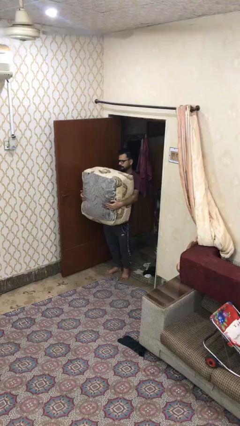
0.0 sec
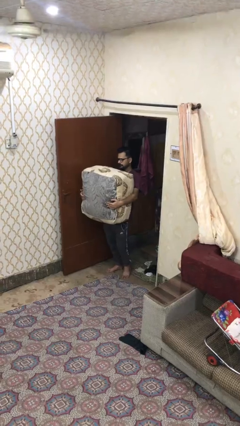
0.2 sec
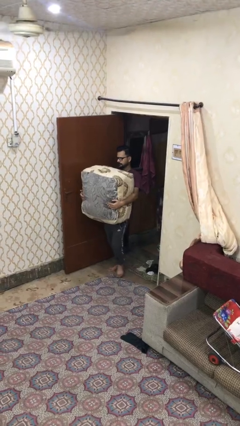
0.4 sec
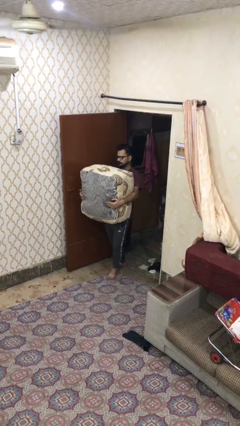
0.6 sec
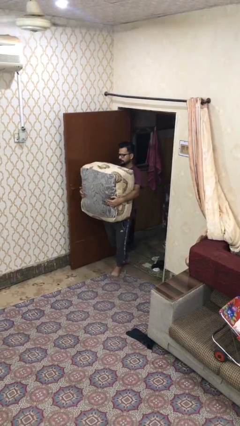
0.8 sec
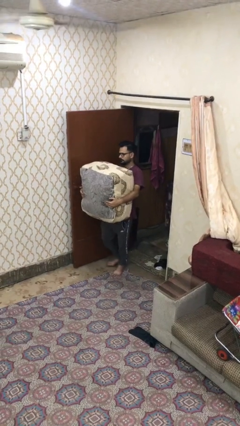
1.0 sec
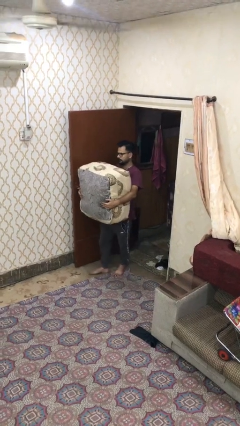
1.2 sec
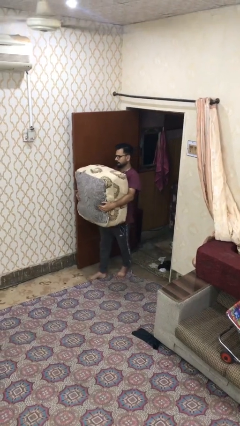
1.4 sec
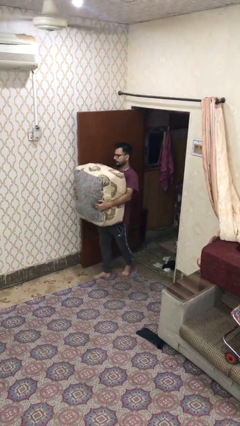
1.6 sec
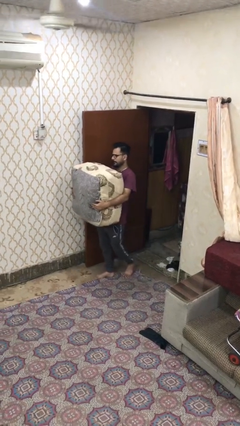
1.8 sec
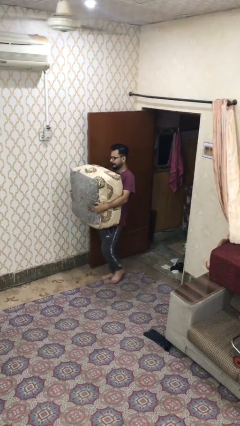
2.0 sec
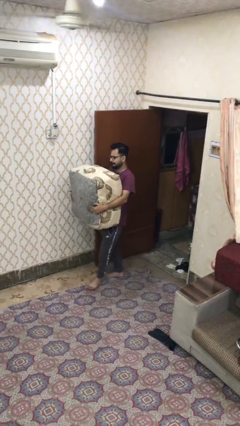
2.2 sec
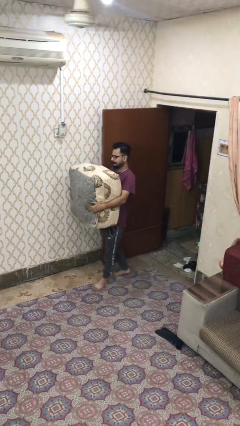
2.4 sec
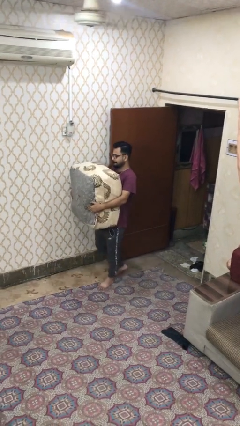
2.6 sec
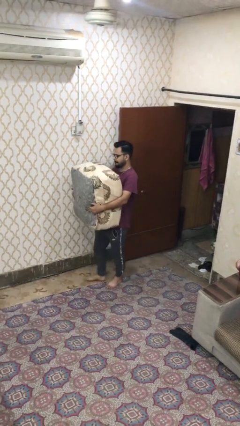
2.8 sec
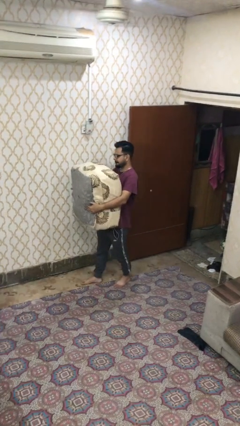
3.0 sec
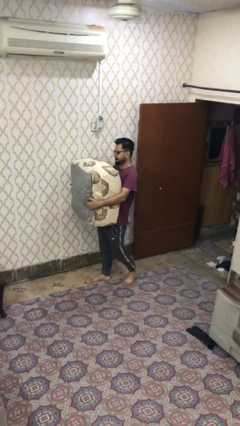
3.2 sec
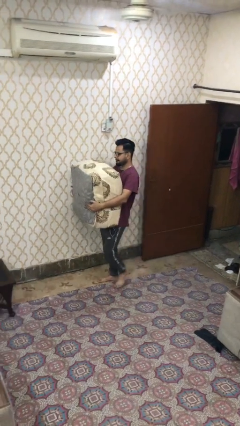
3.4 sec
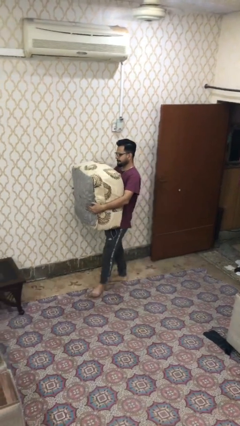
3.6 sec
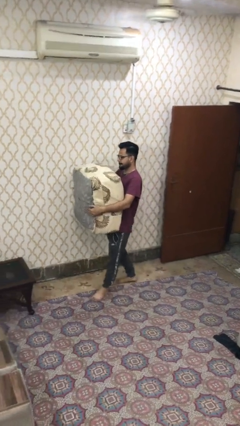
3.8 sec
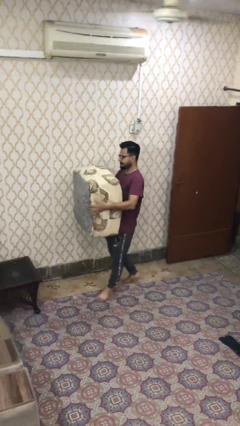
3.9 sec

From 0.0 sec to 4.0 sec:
person carries heavy object

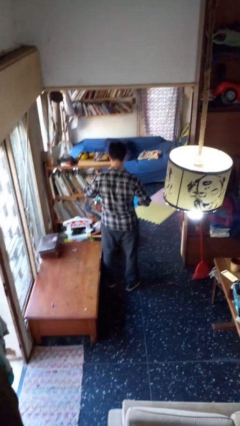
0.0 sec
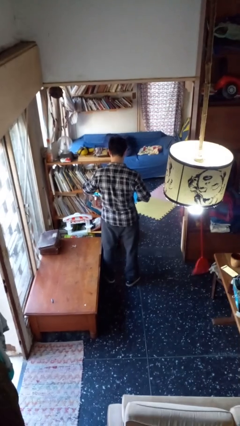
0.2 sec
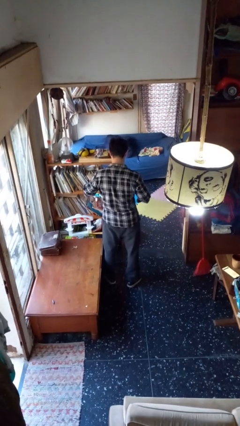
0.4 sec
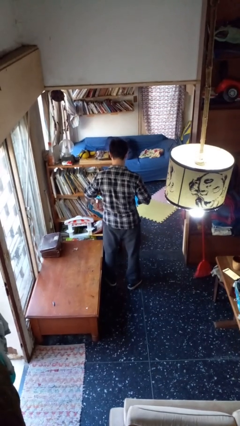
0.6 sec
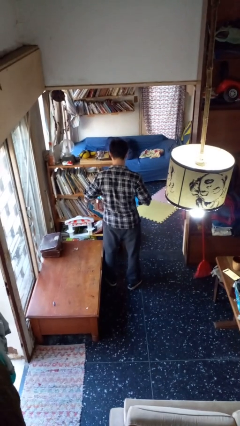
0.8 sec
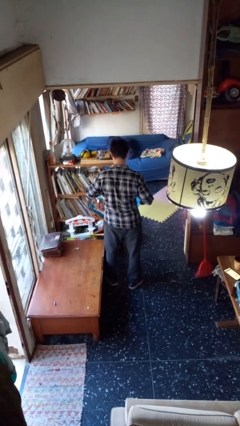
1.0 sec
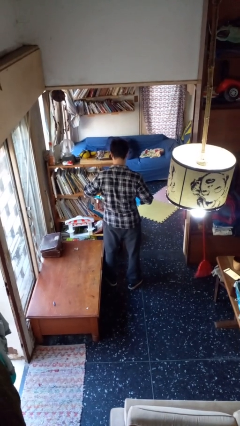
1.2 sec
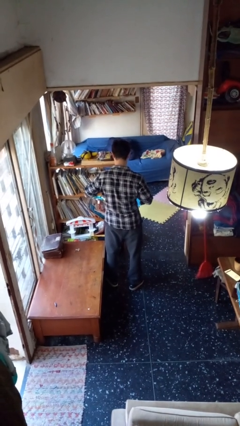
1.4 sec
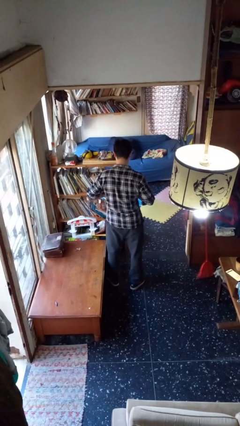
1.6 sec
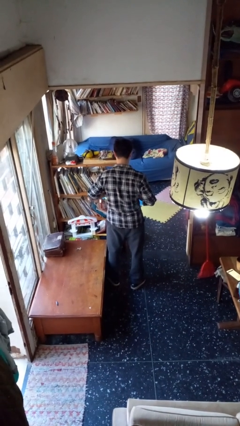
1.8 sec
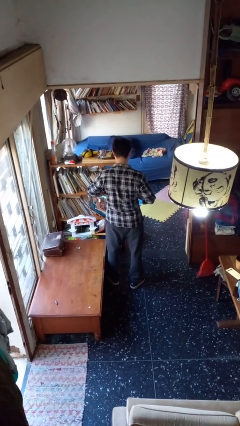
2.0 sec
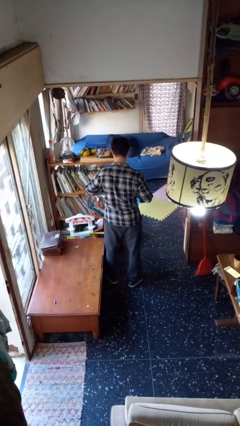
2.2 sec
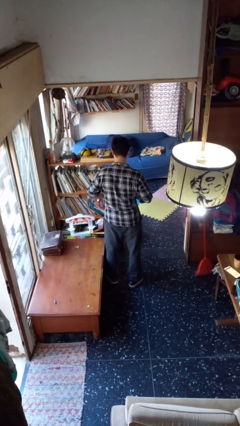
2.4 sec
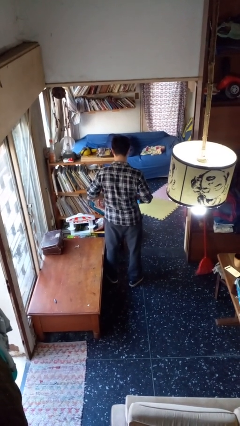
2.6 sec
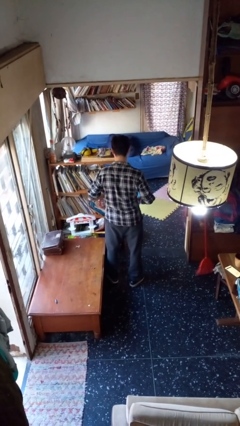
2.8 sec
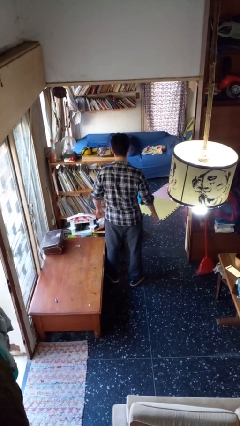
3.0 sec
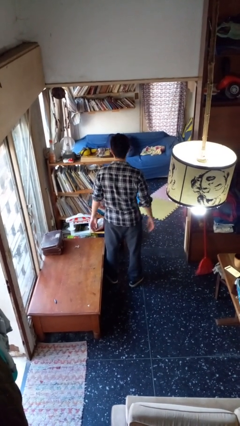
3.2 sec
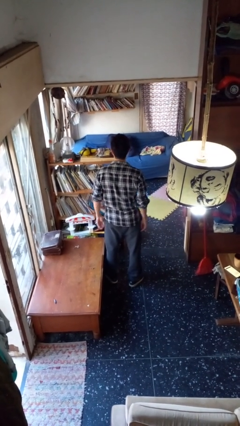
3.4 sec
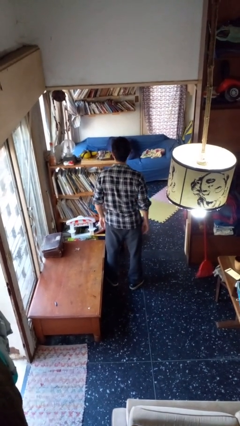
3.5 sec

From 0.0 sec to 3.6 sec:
person unbuttons shirt

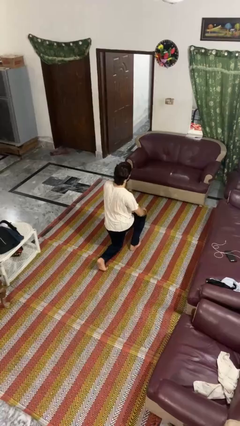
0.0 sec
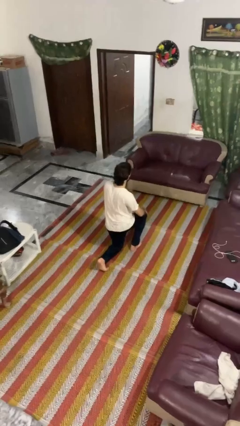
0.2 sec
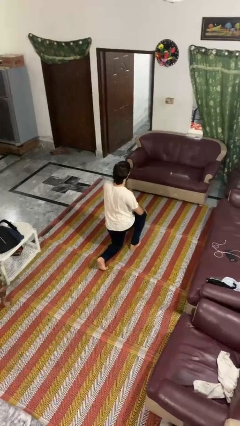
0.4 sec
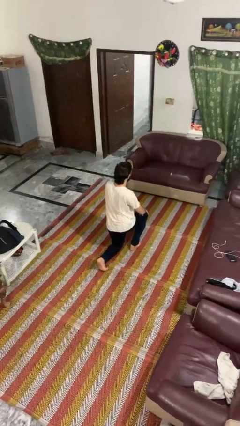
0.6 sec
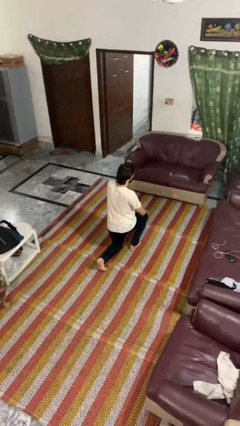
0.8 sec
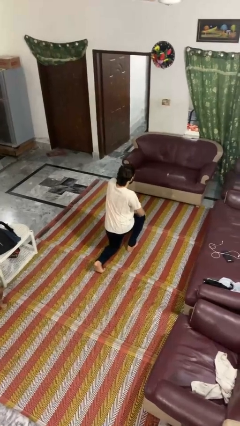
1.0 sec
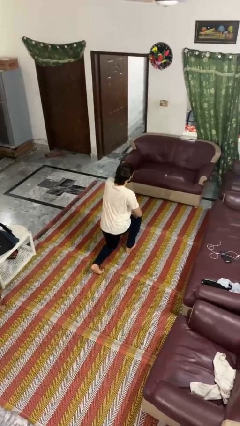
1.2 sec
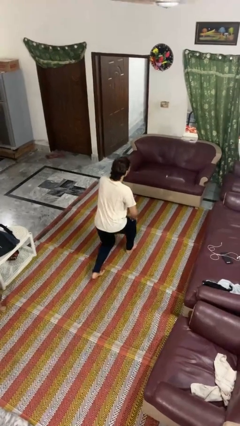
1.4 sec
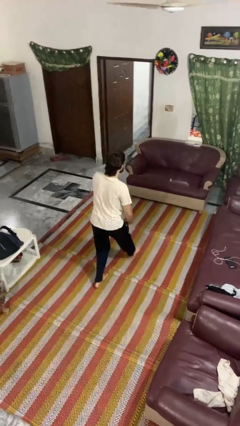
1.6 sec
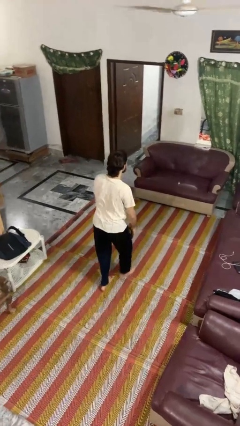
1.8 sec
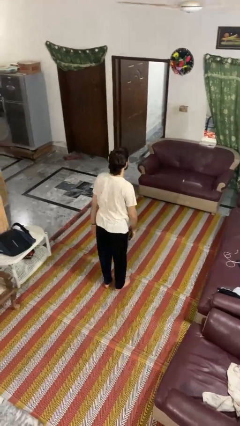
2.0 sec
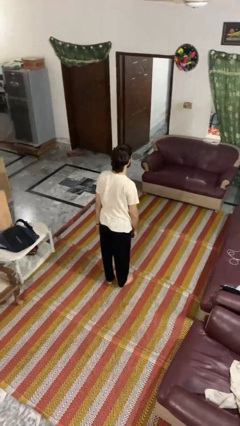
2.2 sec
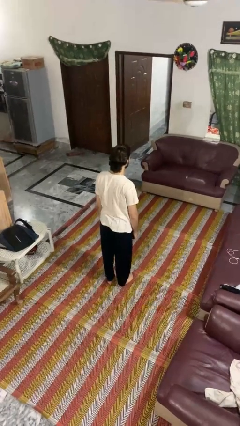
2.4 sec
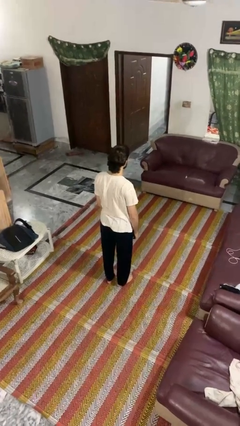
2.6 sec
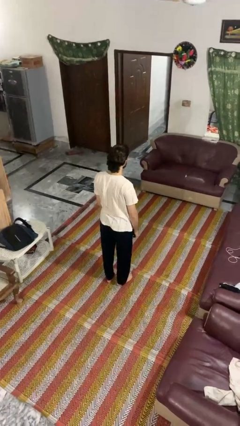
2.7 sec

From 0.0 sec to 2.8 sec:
person stands up from floor

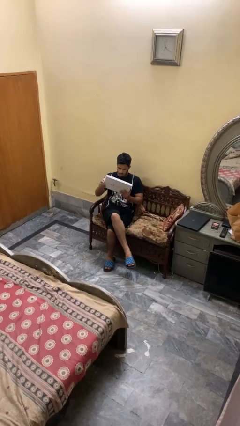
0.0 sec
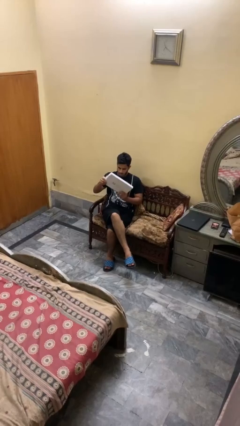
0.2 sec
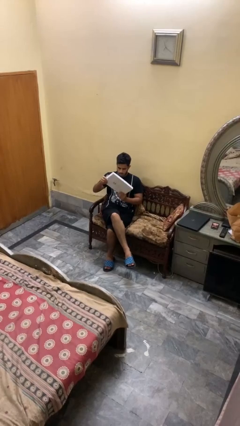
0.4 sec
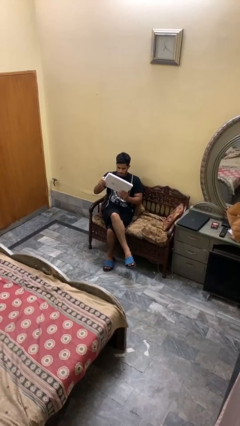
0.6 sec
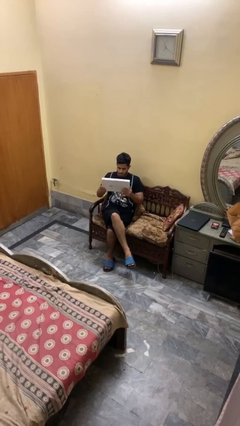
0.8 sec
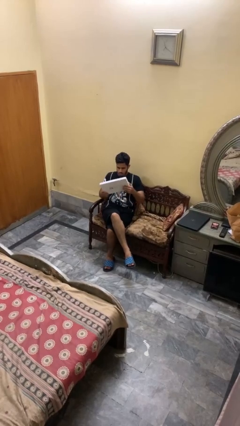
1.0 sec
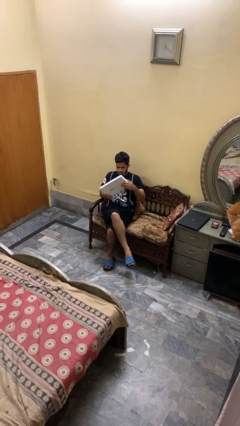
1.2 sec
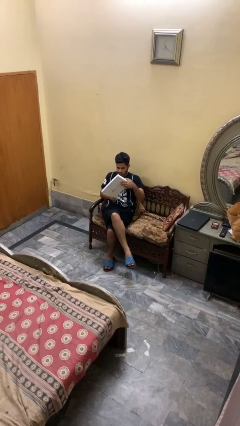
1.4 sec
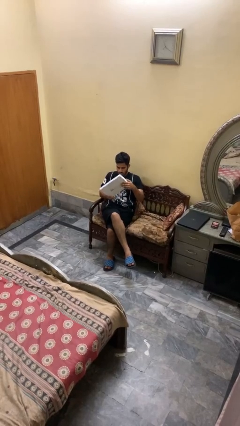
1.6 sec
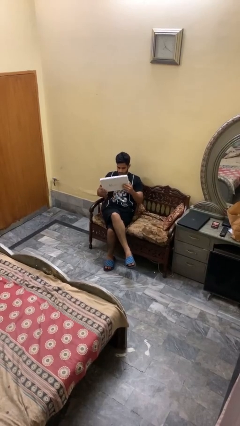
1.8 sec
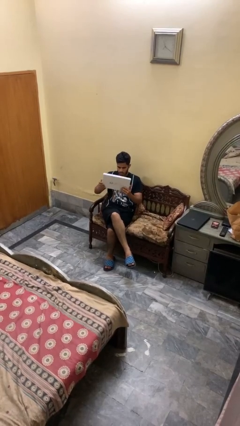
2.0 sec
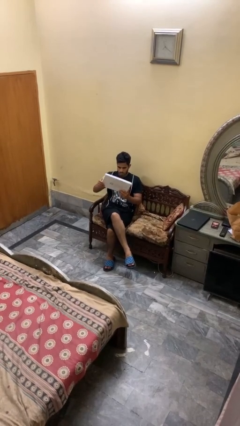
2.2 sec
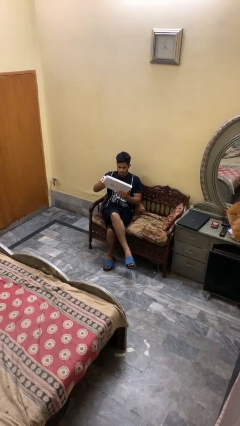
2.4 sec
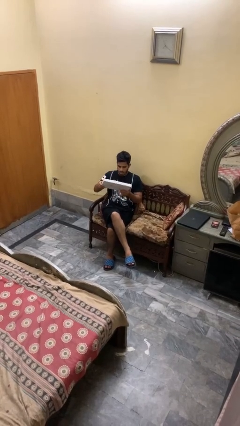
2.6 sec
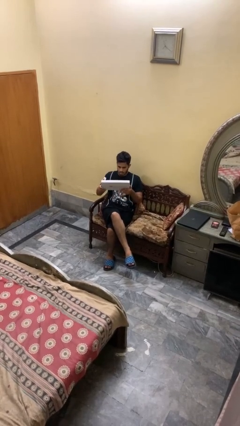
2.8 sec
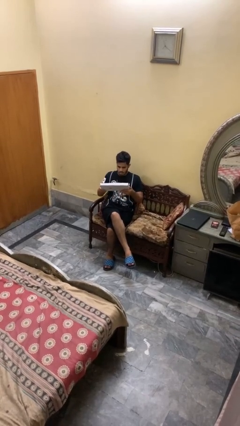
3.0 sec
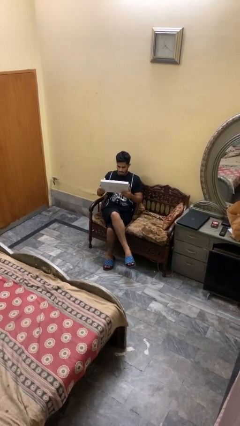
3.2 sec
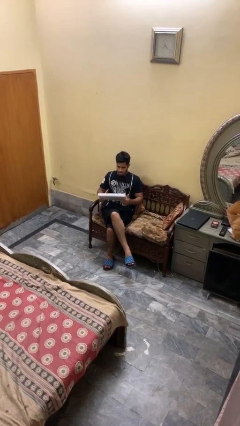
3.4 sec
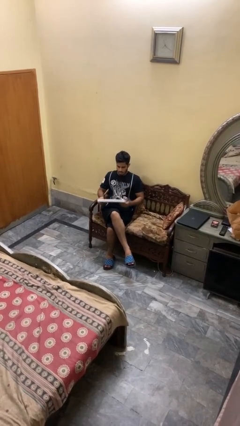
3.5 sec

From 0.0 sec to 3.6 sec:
person interacts with tablet

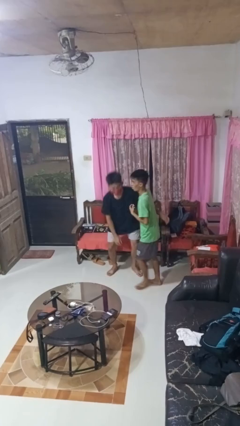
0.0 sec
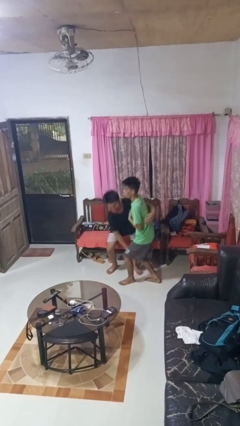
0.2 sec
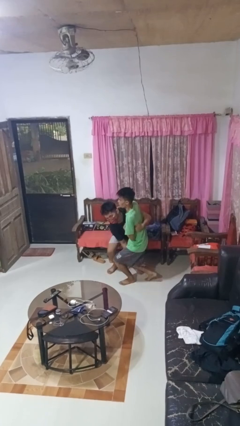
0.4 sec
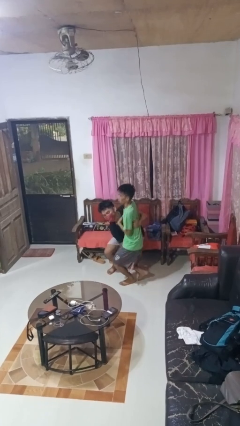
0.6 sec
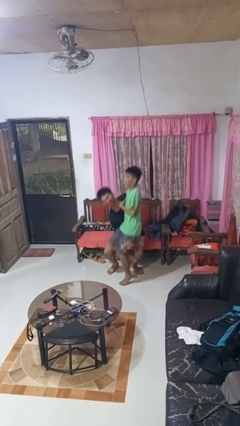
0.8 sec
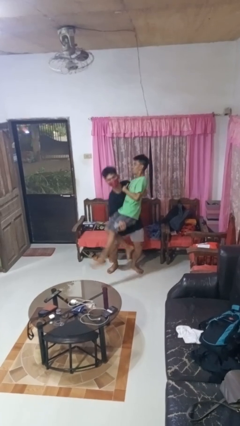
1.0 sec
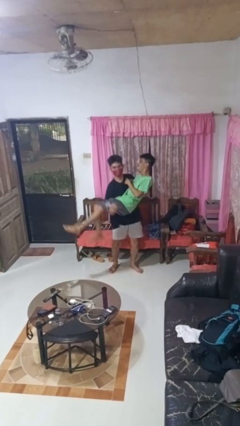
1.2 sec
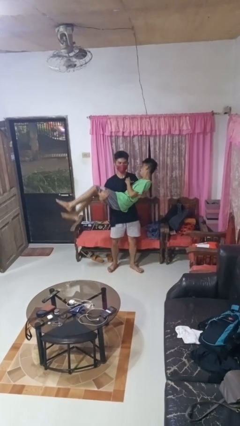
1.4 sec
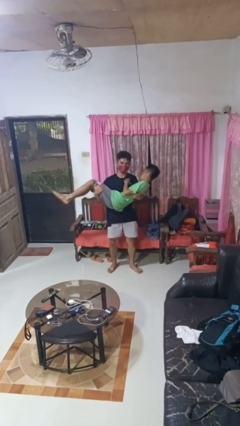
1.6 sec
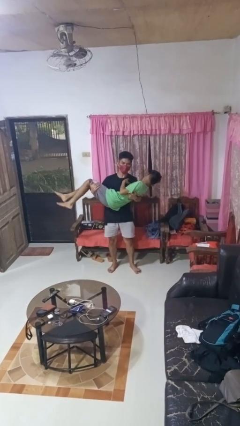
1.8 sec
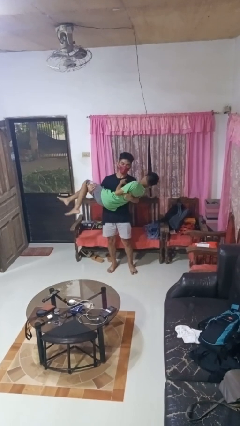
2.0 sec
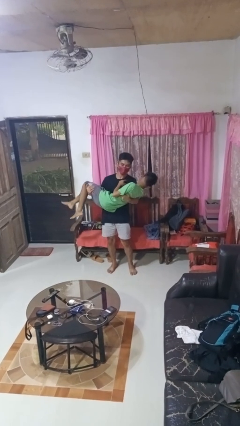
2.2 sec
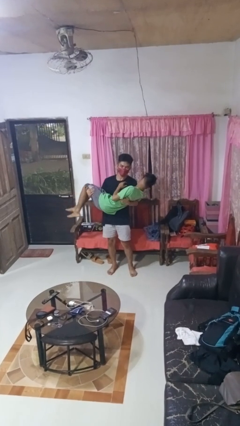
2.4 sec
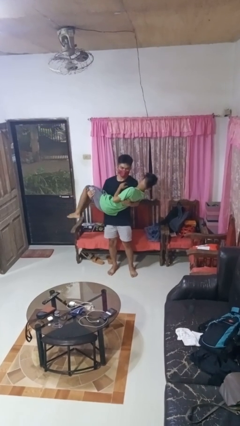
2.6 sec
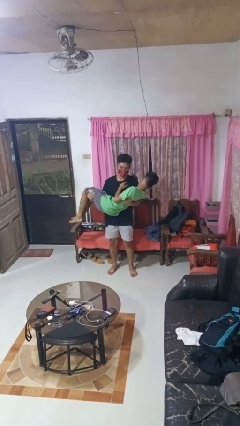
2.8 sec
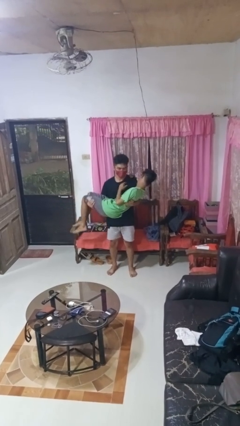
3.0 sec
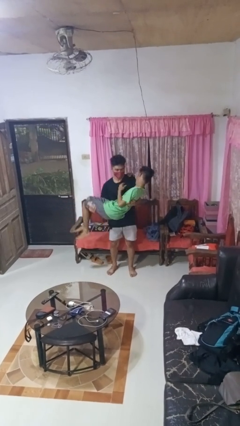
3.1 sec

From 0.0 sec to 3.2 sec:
person carries person over shoulder

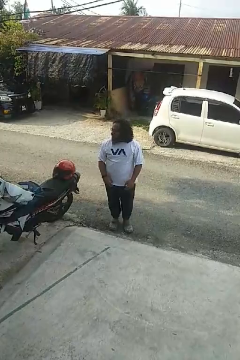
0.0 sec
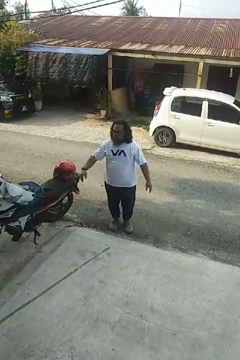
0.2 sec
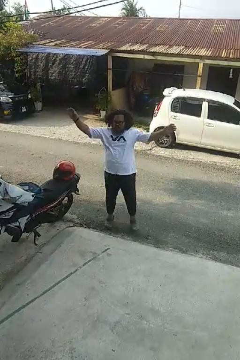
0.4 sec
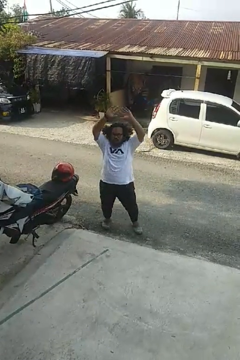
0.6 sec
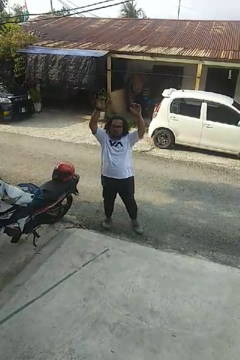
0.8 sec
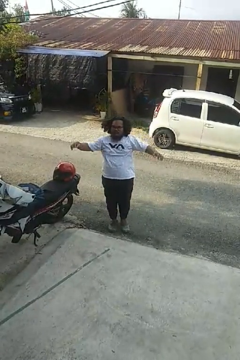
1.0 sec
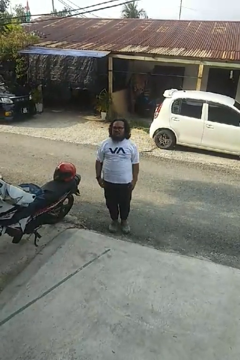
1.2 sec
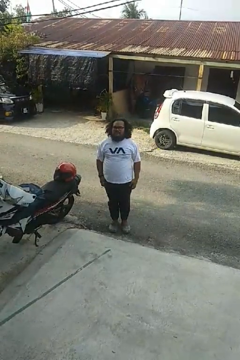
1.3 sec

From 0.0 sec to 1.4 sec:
person exercises with jumping jacks
